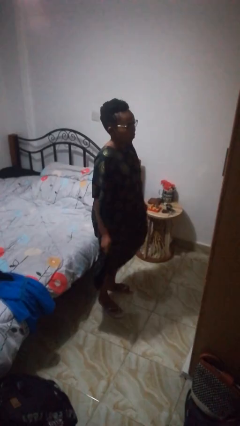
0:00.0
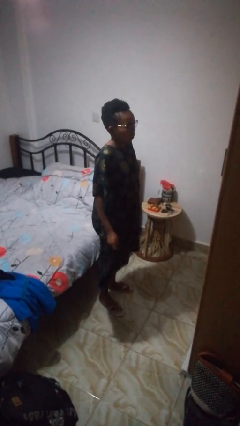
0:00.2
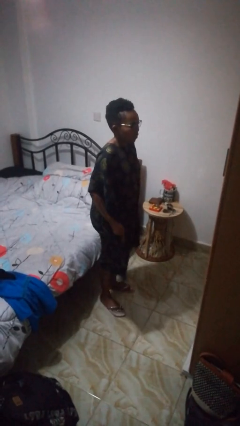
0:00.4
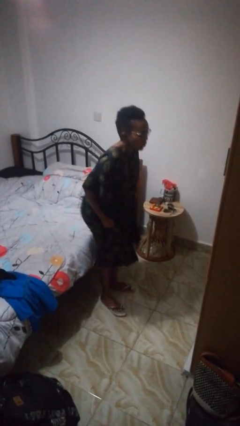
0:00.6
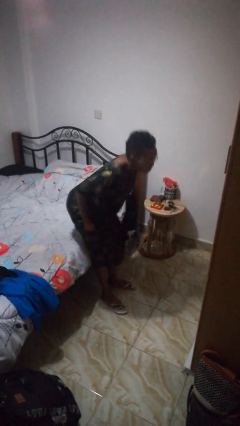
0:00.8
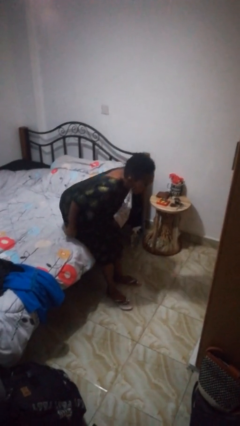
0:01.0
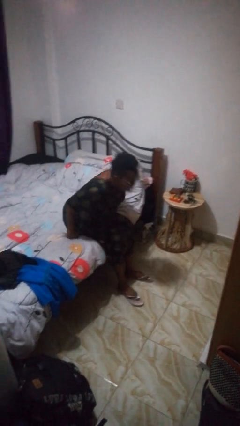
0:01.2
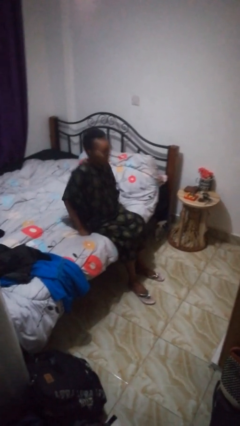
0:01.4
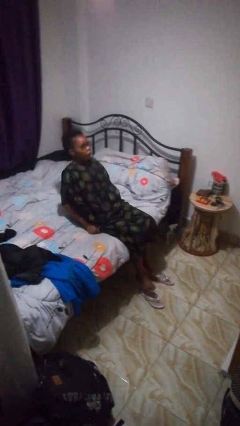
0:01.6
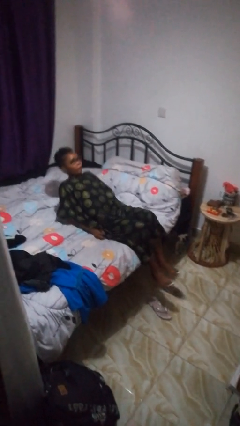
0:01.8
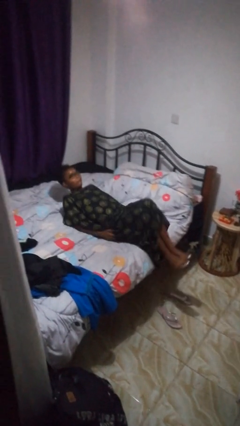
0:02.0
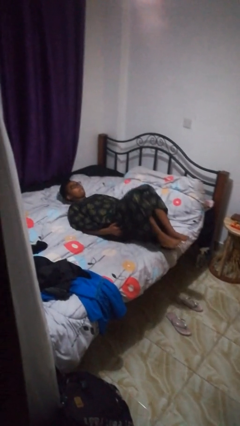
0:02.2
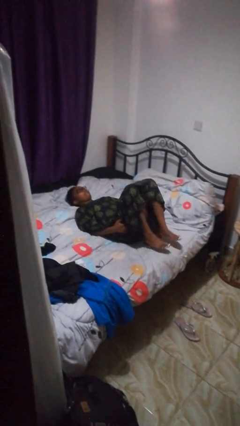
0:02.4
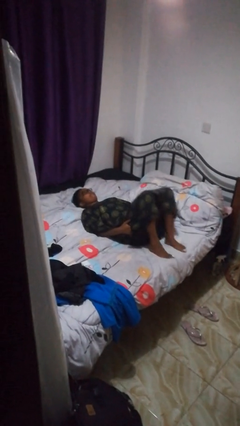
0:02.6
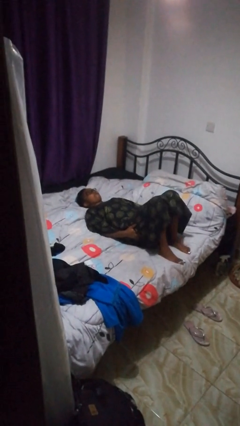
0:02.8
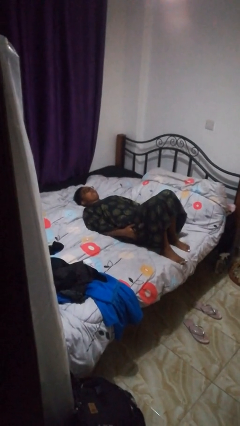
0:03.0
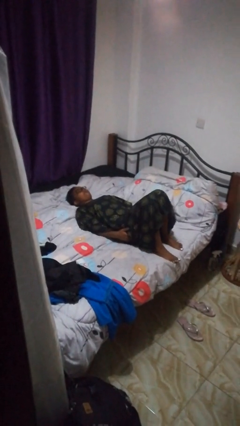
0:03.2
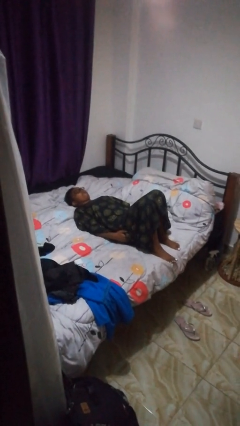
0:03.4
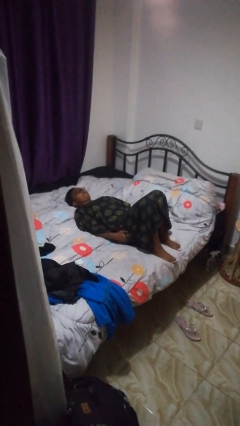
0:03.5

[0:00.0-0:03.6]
person lies down on bed

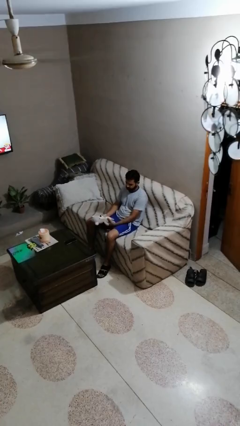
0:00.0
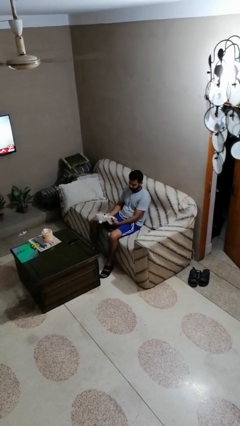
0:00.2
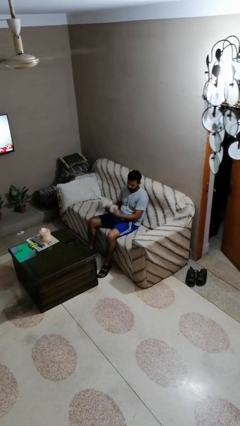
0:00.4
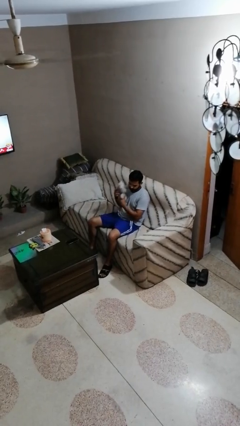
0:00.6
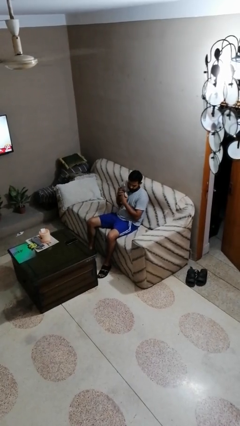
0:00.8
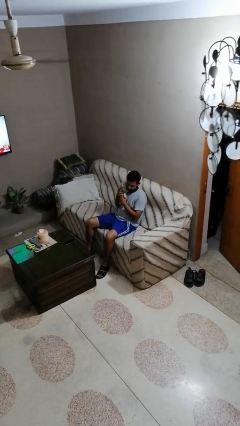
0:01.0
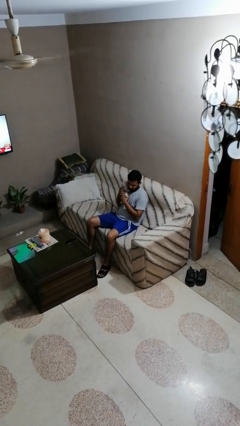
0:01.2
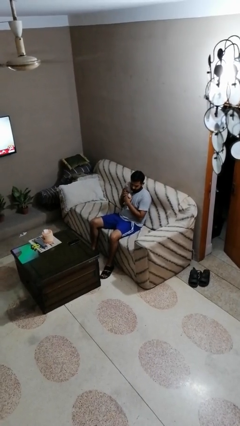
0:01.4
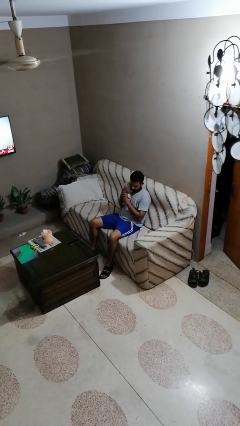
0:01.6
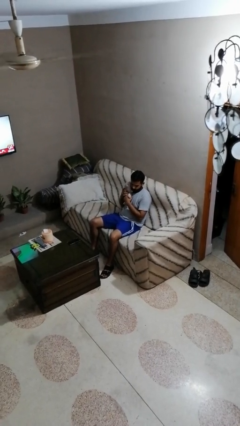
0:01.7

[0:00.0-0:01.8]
person hugs stuffed animal

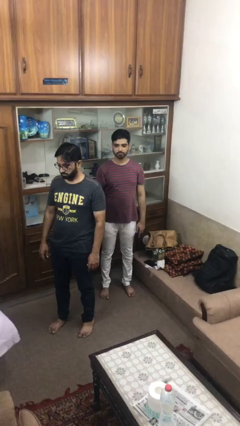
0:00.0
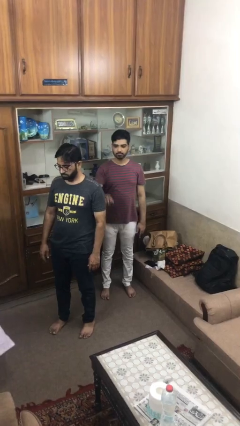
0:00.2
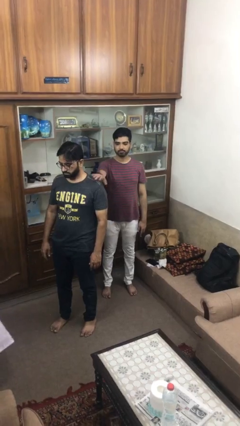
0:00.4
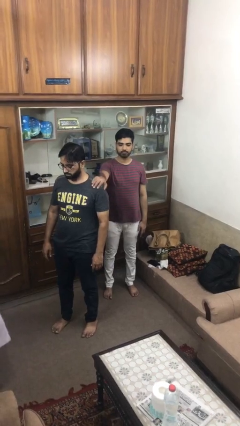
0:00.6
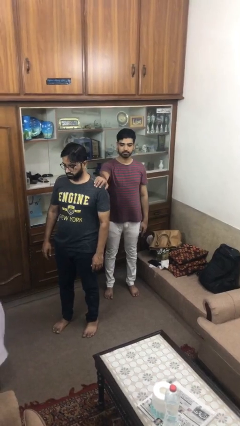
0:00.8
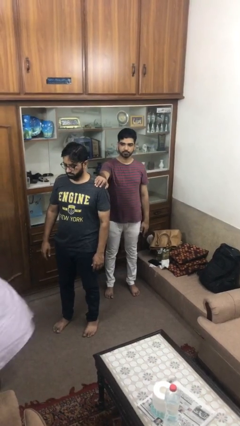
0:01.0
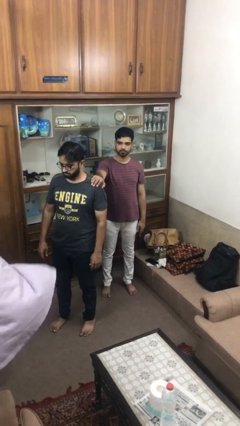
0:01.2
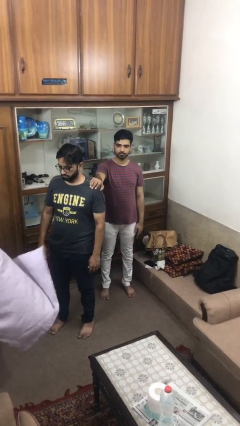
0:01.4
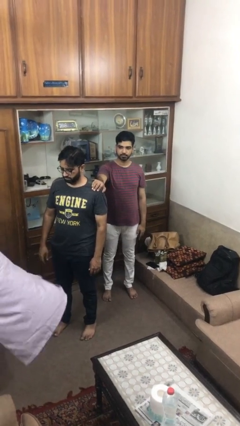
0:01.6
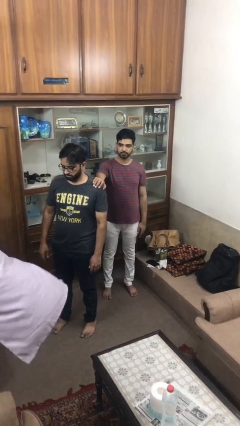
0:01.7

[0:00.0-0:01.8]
person grabs person by shoulder

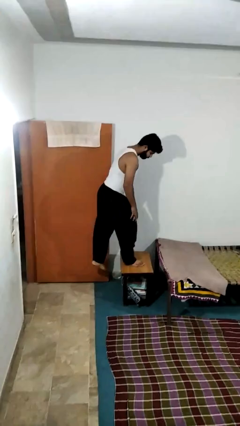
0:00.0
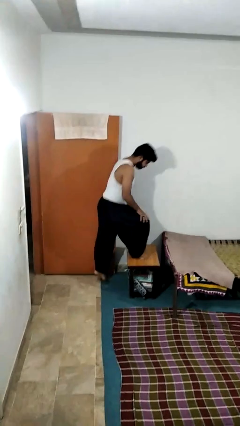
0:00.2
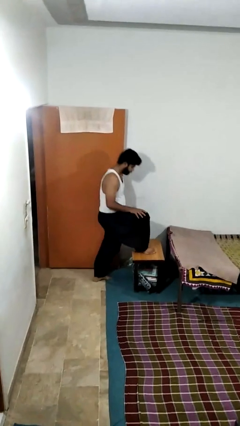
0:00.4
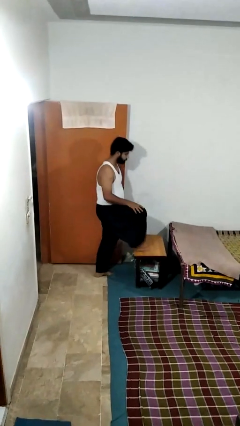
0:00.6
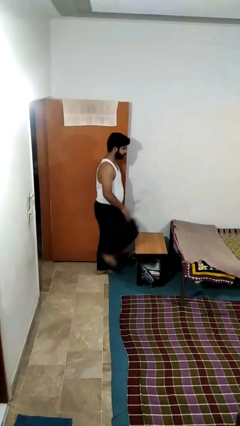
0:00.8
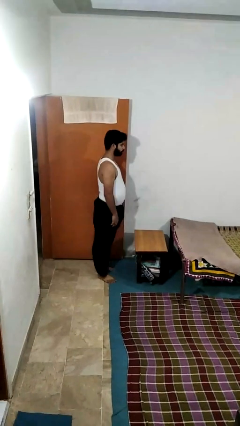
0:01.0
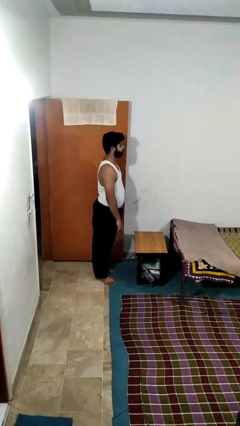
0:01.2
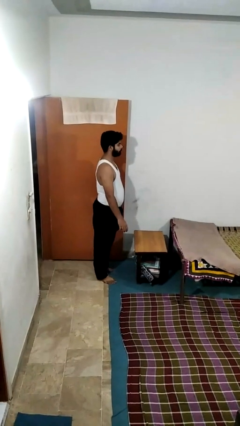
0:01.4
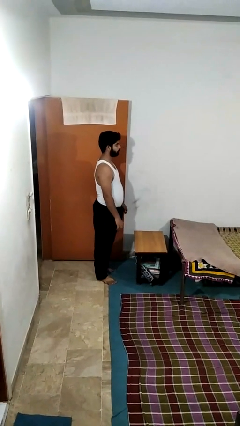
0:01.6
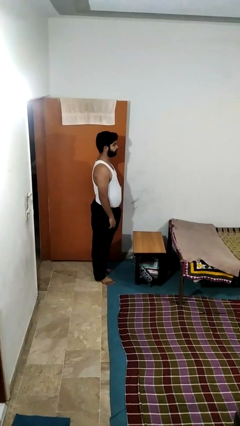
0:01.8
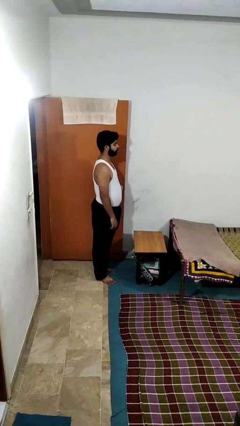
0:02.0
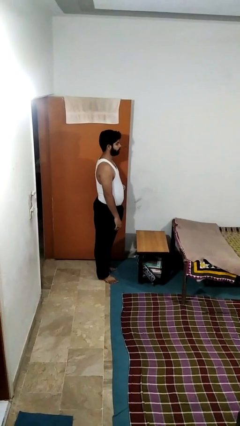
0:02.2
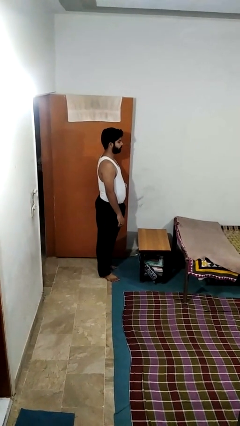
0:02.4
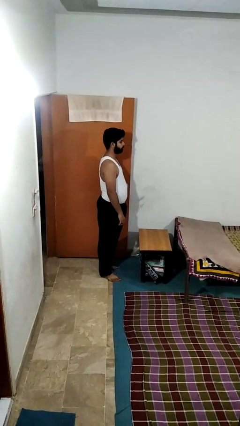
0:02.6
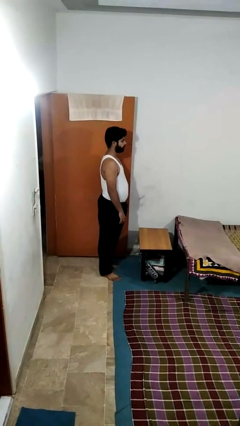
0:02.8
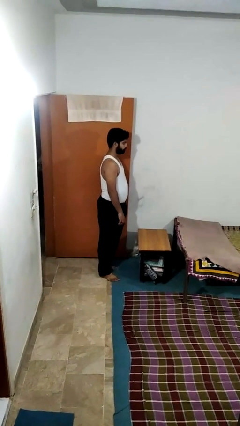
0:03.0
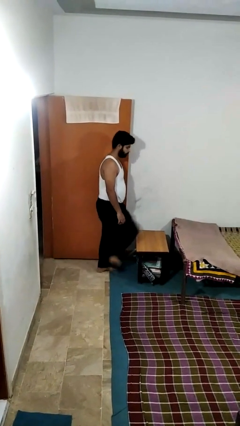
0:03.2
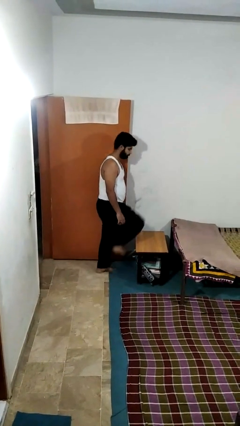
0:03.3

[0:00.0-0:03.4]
person climbs off table

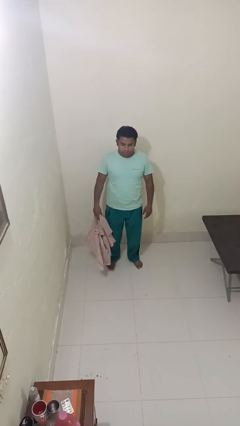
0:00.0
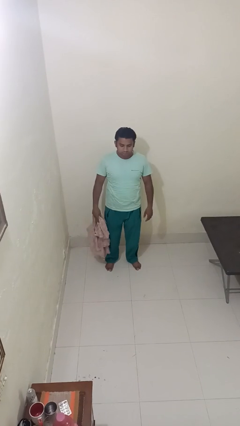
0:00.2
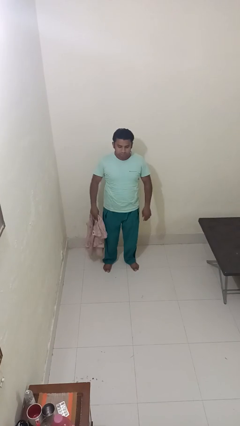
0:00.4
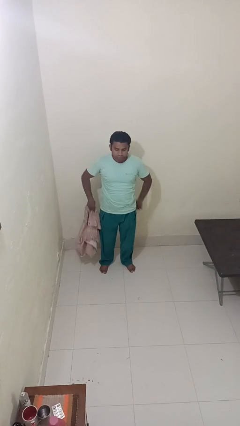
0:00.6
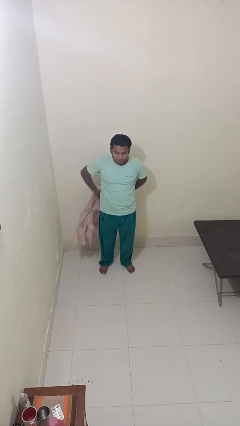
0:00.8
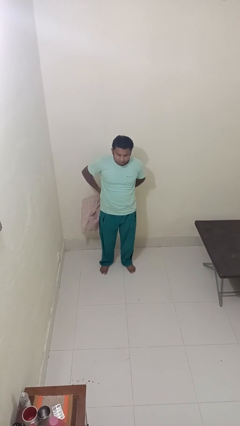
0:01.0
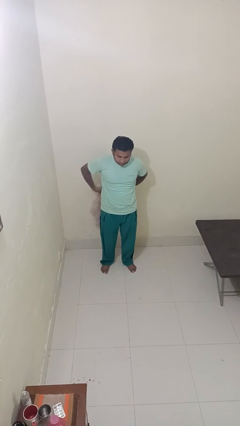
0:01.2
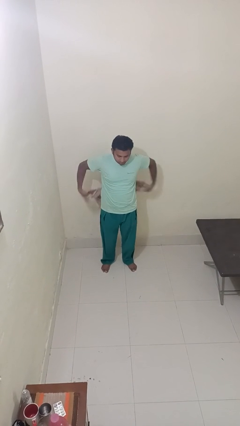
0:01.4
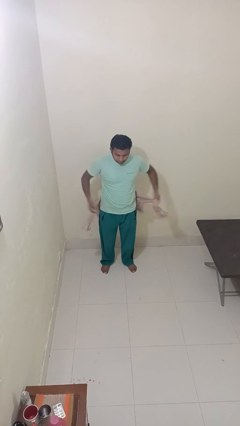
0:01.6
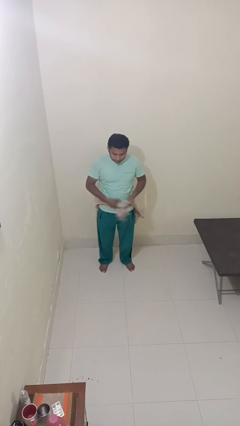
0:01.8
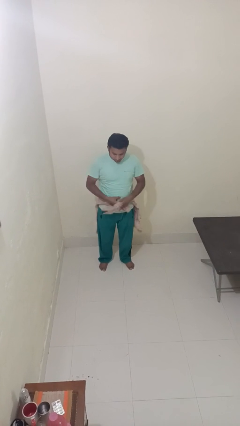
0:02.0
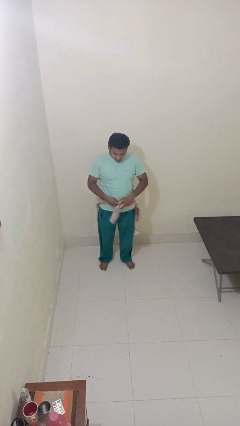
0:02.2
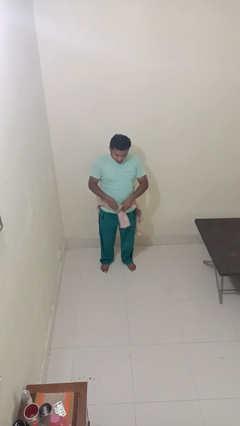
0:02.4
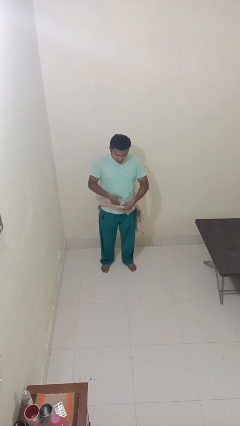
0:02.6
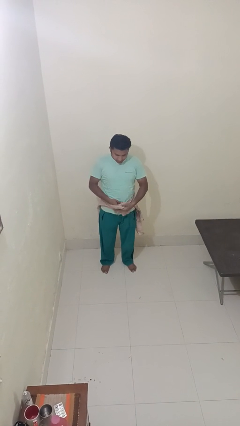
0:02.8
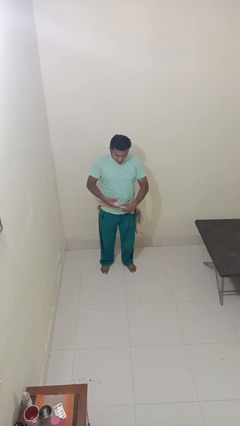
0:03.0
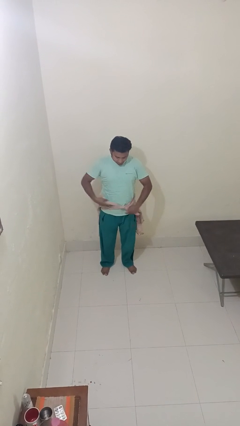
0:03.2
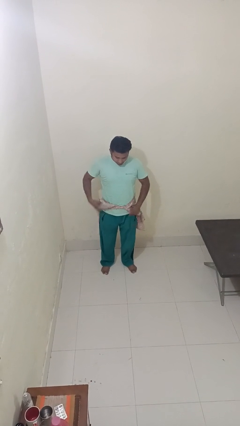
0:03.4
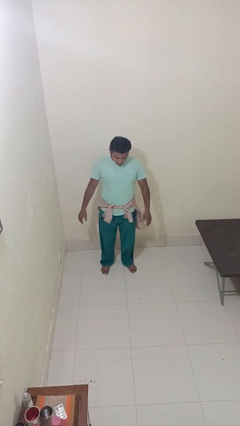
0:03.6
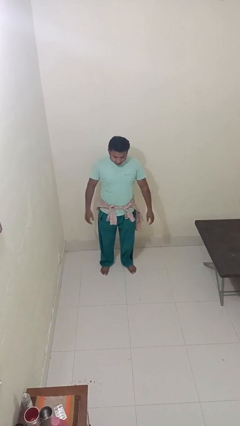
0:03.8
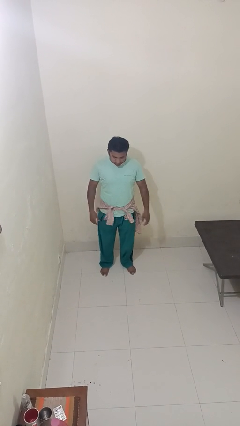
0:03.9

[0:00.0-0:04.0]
person ties jacket around waist

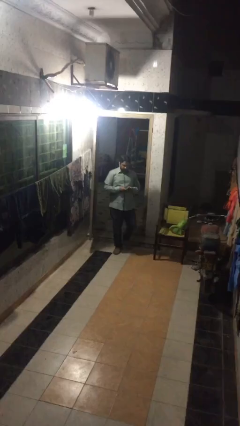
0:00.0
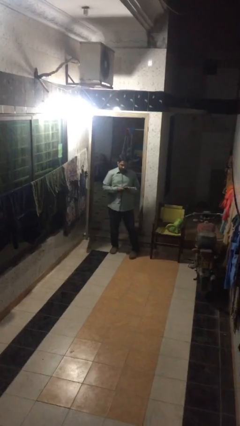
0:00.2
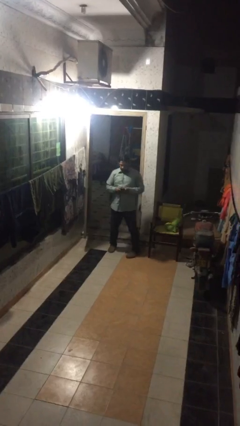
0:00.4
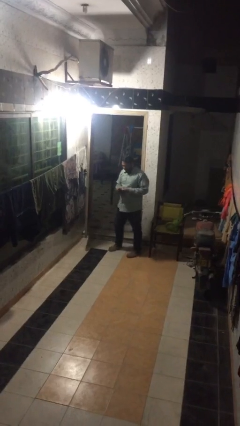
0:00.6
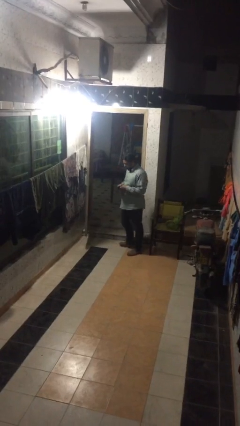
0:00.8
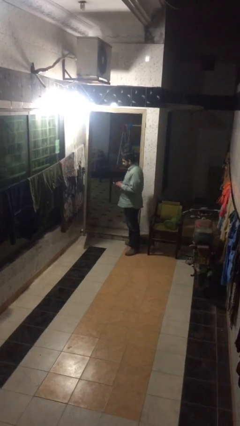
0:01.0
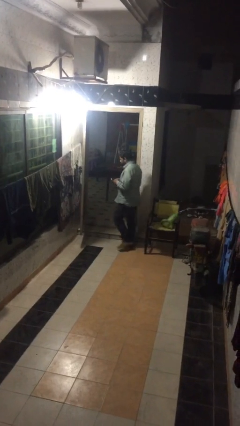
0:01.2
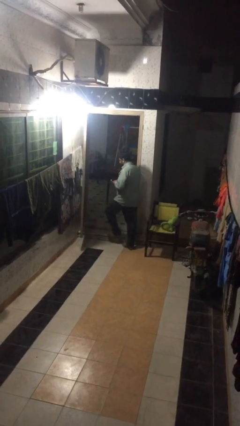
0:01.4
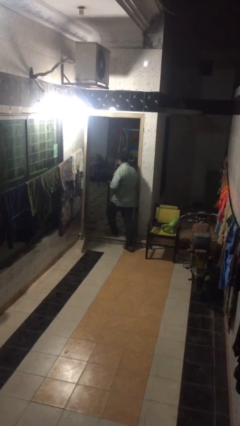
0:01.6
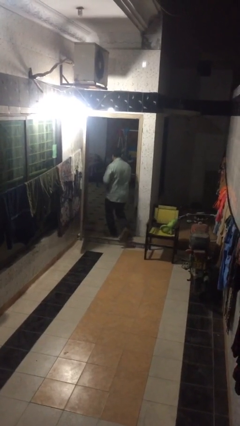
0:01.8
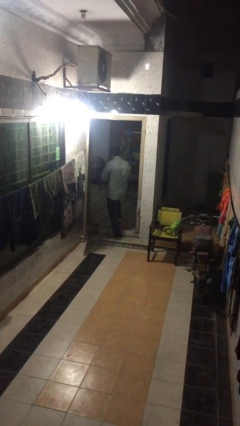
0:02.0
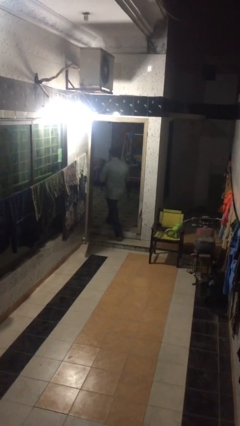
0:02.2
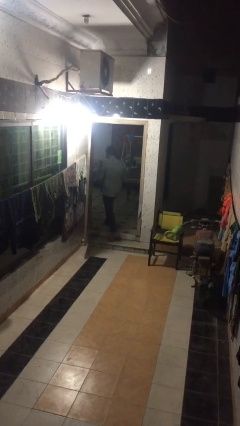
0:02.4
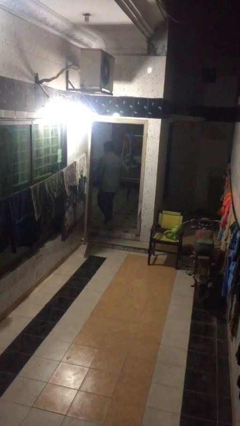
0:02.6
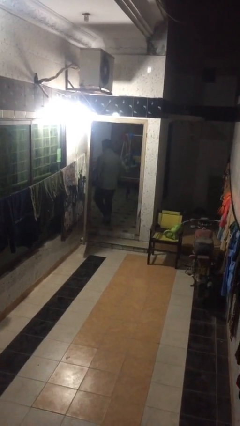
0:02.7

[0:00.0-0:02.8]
person exits scene through structure
